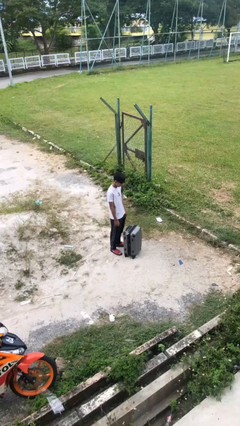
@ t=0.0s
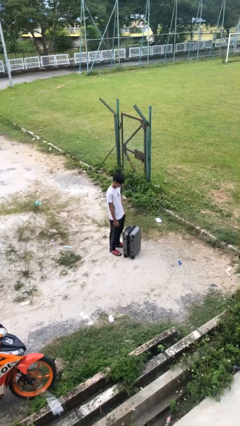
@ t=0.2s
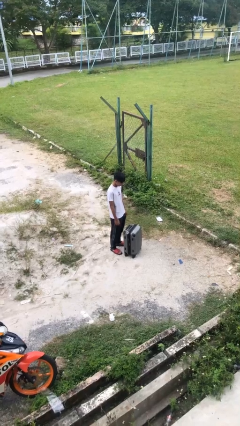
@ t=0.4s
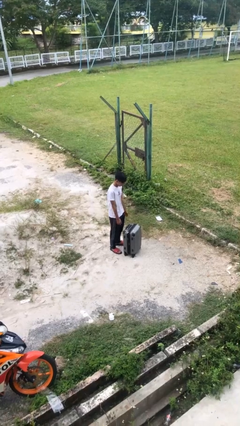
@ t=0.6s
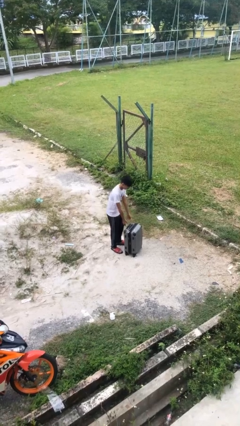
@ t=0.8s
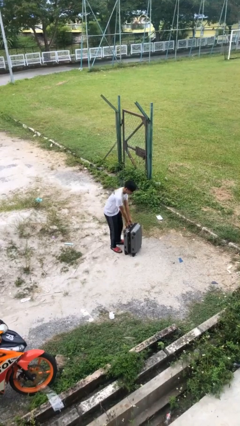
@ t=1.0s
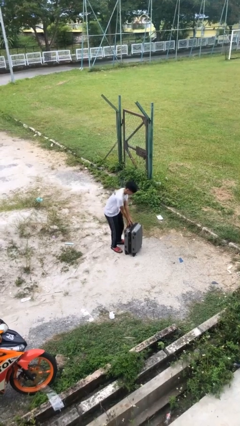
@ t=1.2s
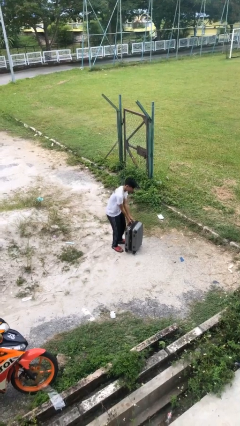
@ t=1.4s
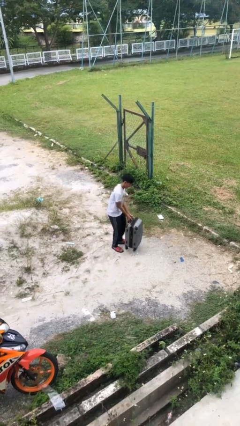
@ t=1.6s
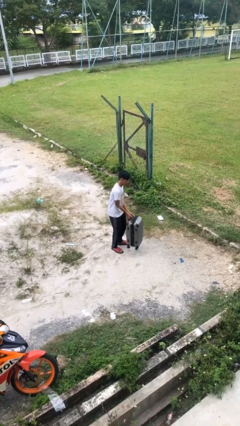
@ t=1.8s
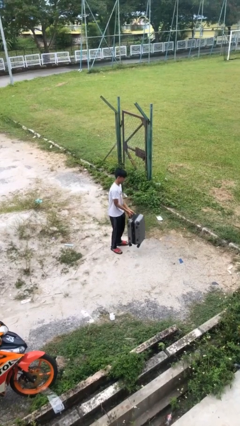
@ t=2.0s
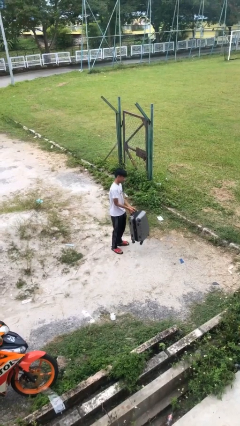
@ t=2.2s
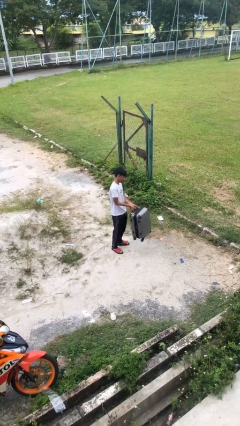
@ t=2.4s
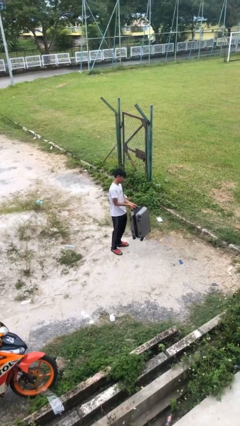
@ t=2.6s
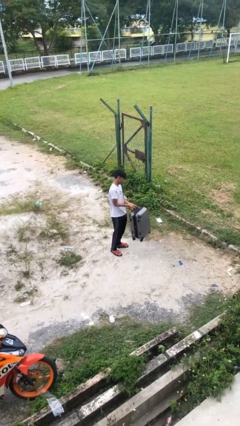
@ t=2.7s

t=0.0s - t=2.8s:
person picks up object from floor

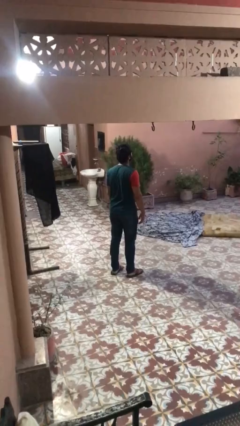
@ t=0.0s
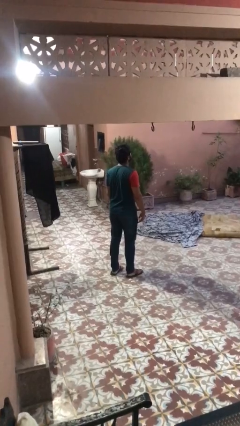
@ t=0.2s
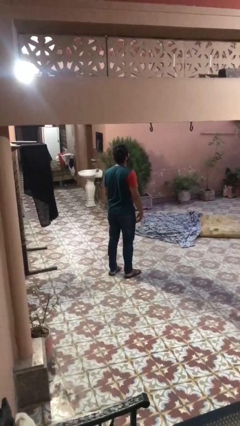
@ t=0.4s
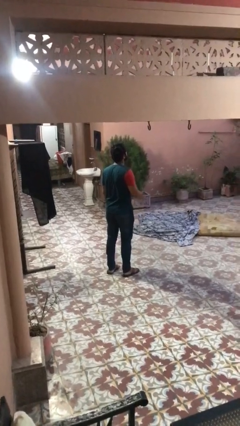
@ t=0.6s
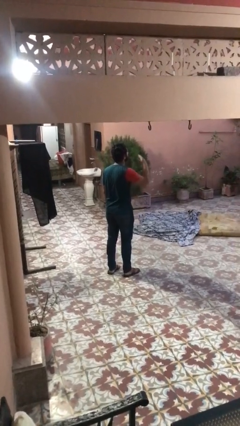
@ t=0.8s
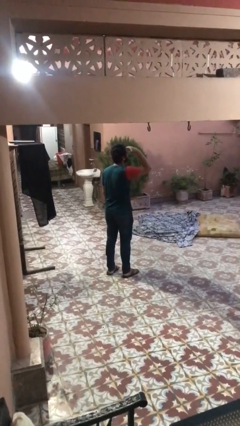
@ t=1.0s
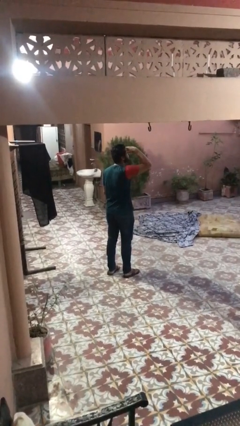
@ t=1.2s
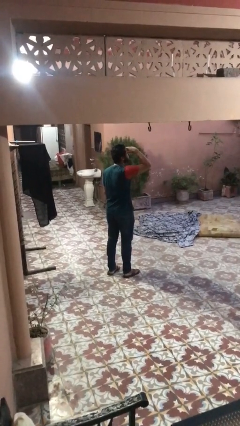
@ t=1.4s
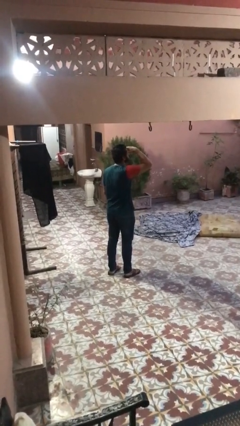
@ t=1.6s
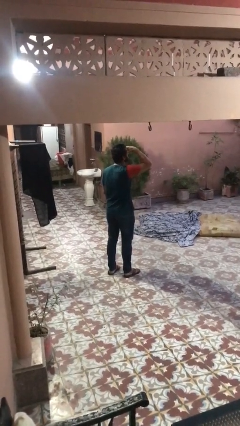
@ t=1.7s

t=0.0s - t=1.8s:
person shades eyes

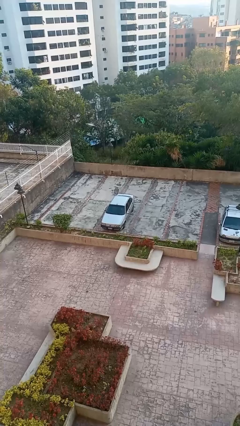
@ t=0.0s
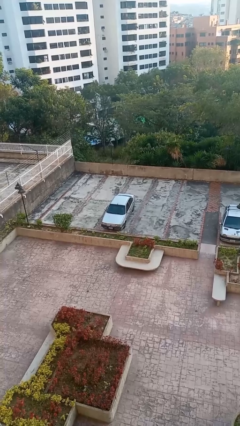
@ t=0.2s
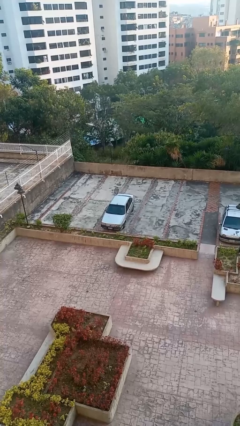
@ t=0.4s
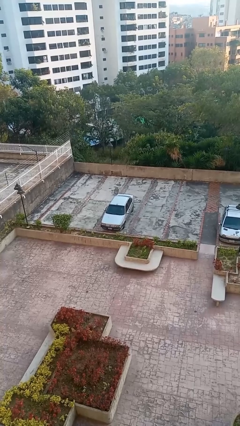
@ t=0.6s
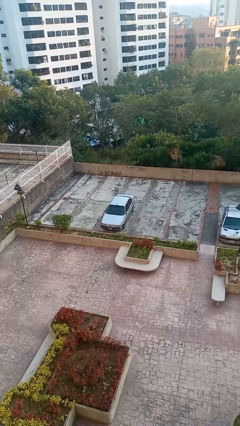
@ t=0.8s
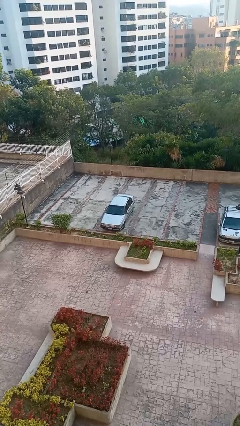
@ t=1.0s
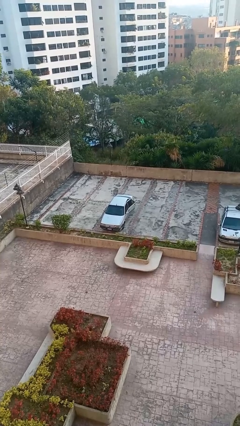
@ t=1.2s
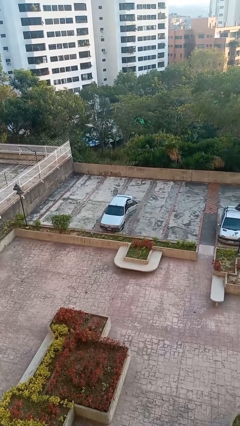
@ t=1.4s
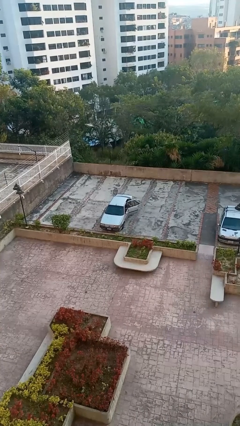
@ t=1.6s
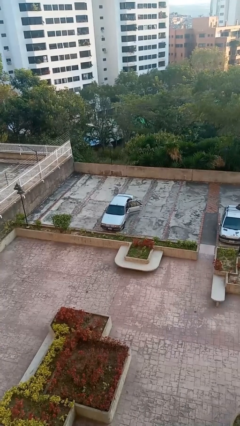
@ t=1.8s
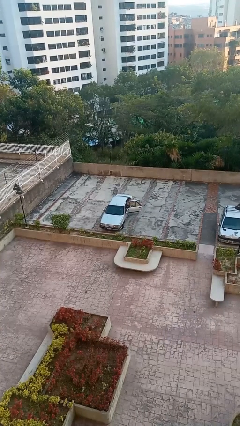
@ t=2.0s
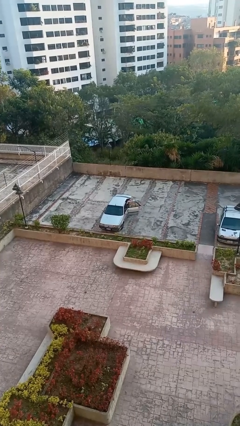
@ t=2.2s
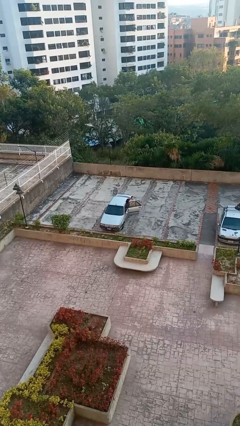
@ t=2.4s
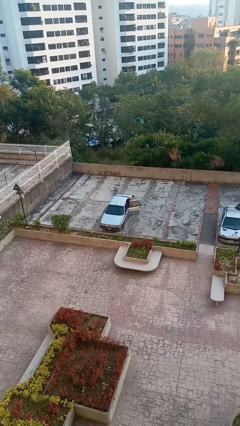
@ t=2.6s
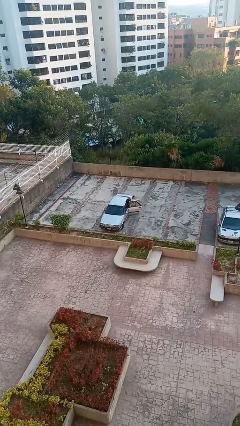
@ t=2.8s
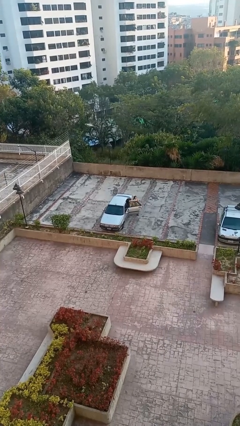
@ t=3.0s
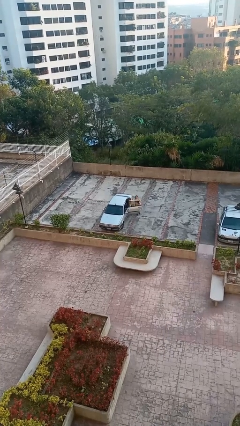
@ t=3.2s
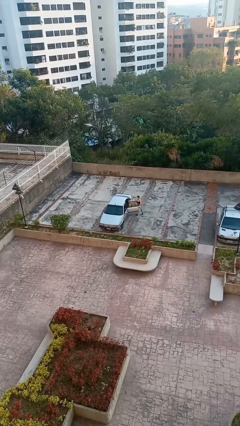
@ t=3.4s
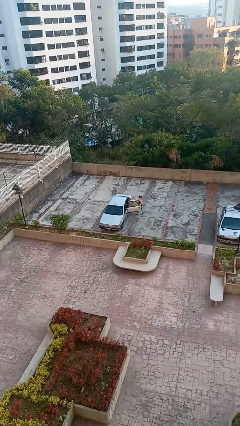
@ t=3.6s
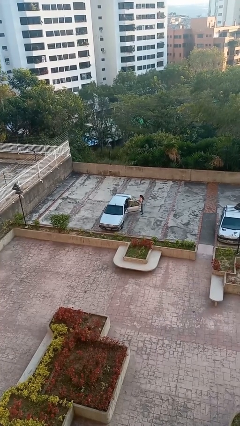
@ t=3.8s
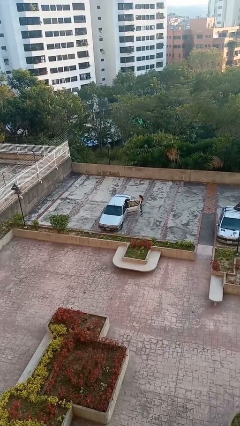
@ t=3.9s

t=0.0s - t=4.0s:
car drops off person

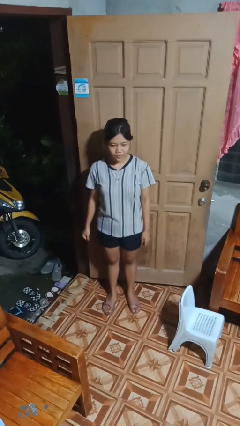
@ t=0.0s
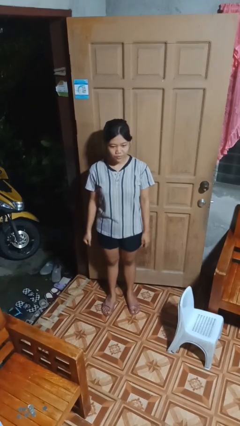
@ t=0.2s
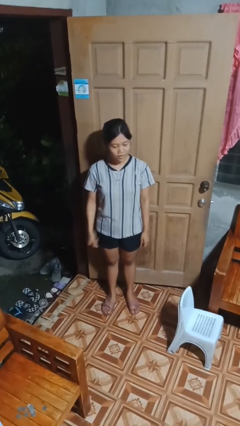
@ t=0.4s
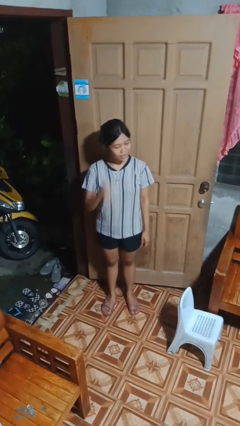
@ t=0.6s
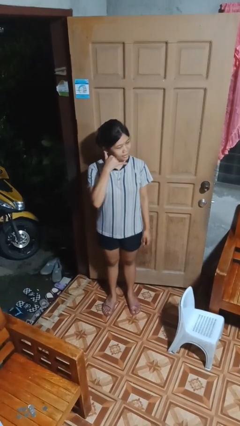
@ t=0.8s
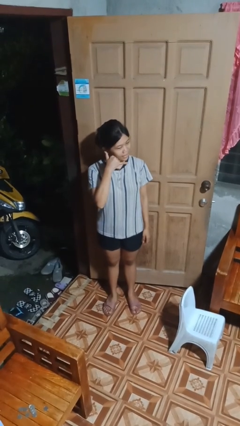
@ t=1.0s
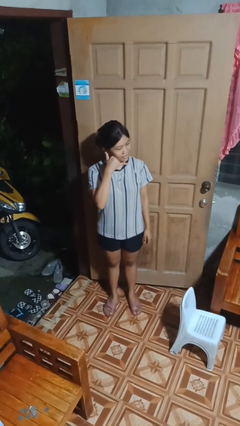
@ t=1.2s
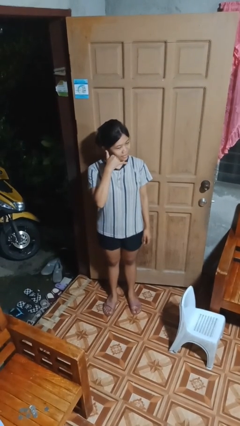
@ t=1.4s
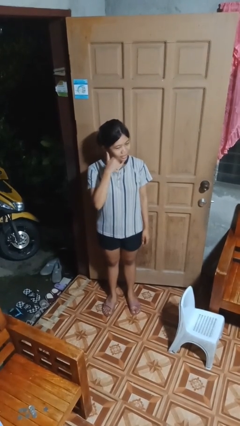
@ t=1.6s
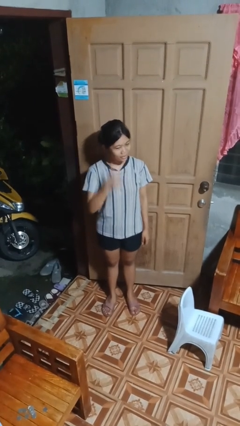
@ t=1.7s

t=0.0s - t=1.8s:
person gestures call me

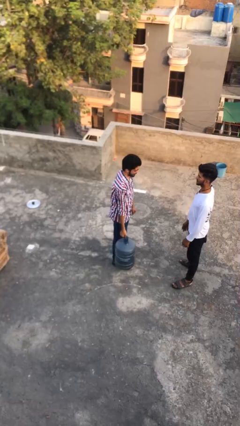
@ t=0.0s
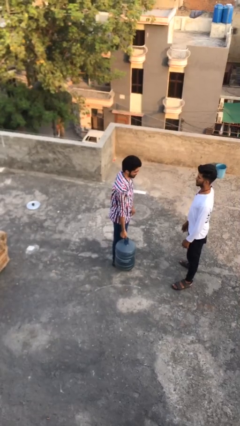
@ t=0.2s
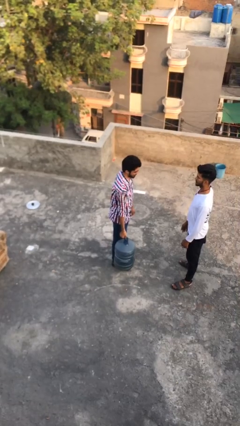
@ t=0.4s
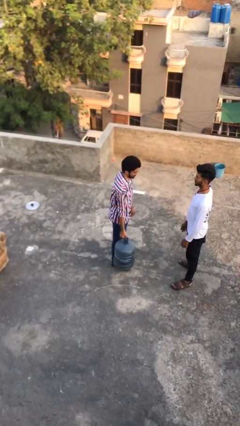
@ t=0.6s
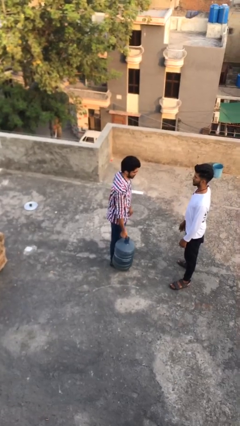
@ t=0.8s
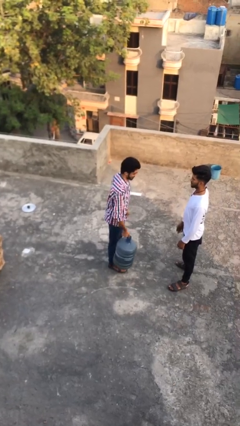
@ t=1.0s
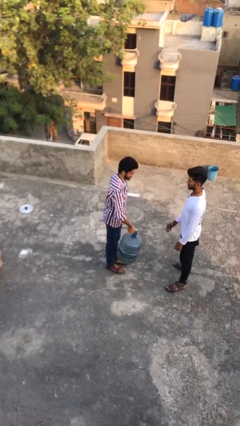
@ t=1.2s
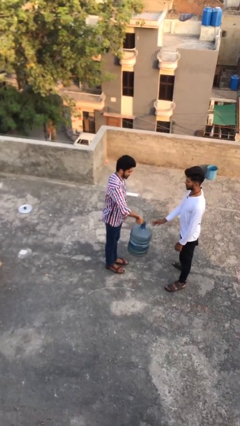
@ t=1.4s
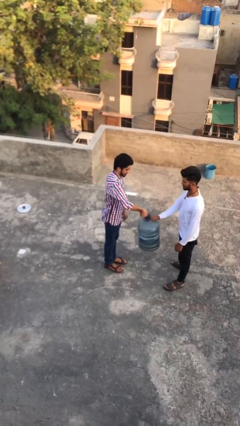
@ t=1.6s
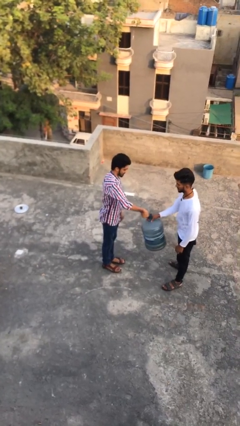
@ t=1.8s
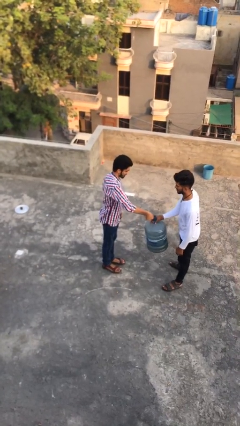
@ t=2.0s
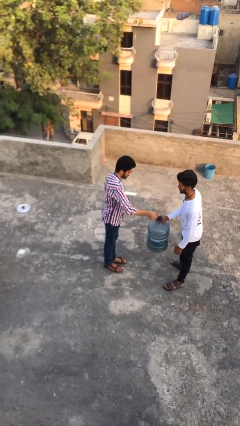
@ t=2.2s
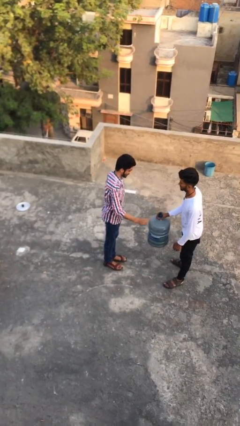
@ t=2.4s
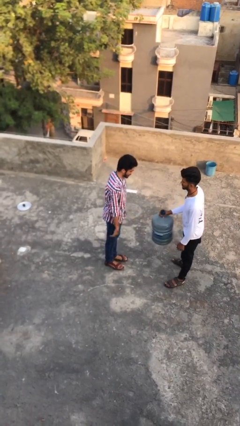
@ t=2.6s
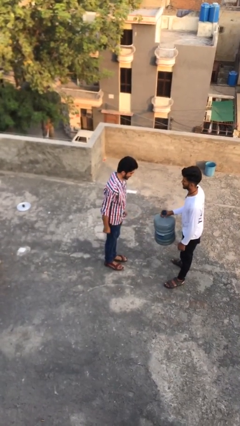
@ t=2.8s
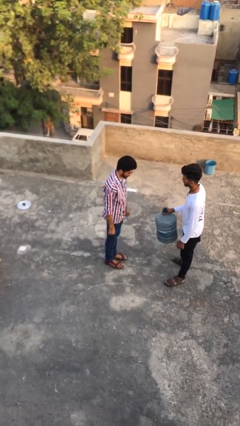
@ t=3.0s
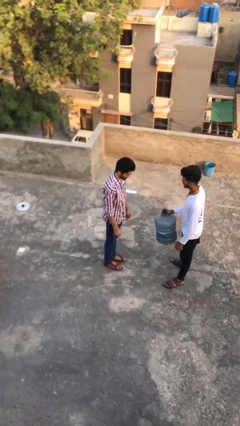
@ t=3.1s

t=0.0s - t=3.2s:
person transfers object to person

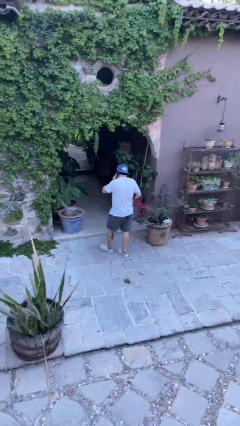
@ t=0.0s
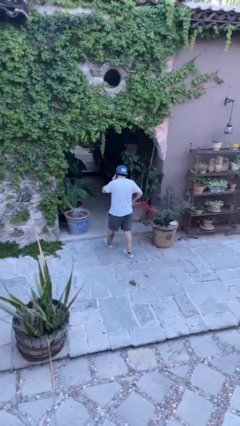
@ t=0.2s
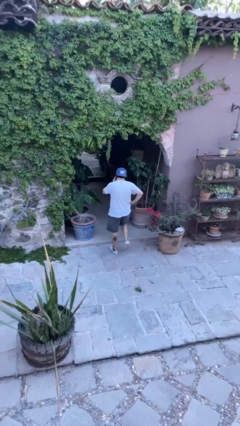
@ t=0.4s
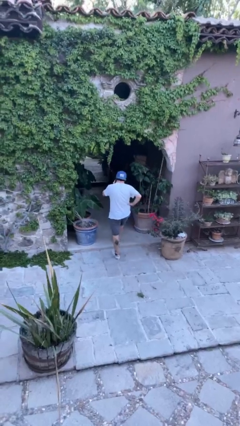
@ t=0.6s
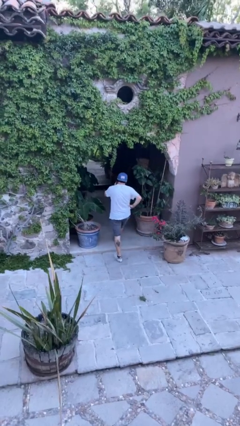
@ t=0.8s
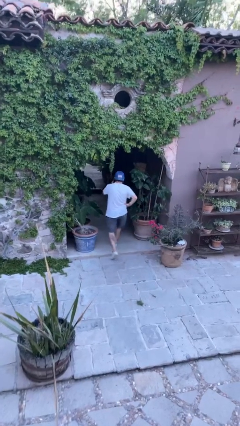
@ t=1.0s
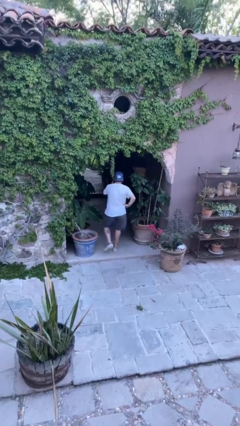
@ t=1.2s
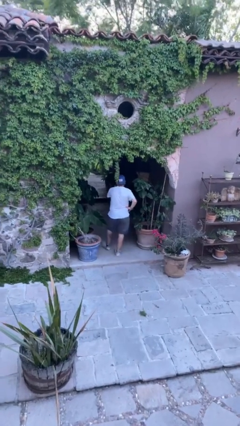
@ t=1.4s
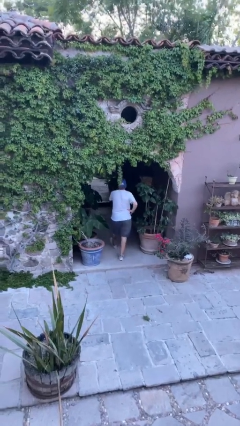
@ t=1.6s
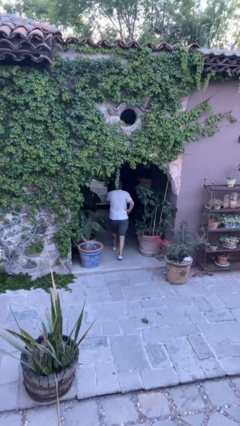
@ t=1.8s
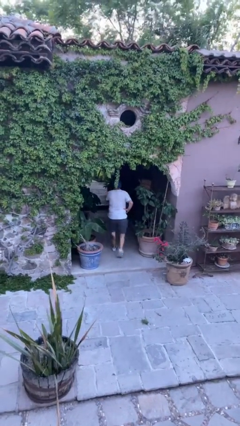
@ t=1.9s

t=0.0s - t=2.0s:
person exits scene through structure

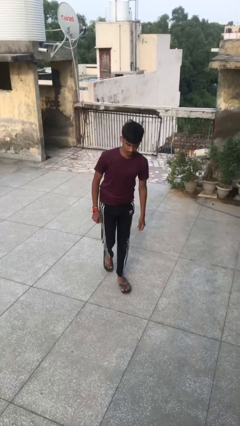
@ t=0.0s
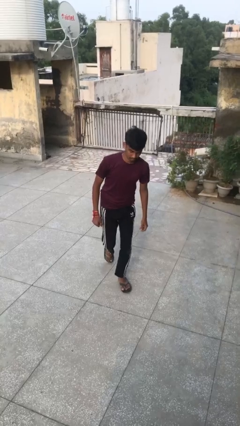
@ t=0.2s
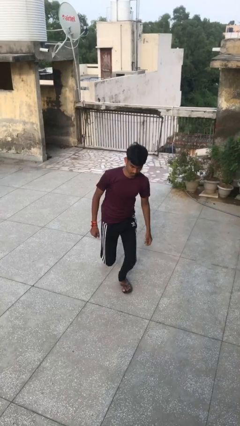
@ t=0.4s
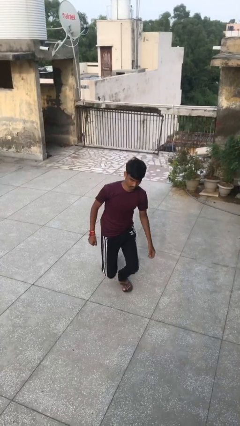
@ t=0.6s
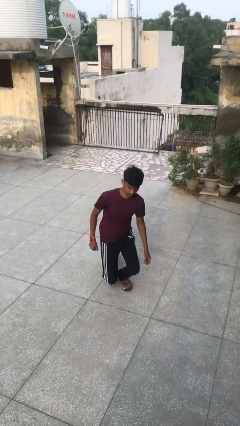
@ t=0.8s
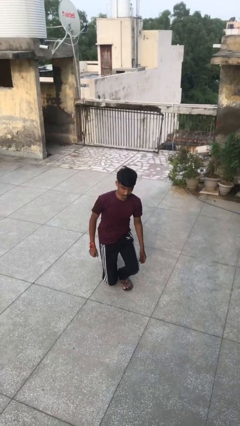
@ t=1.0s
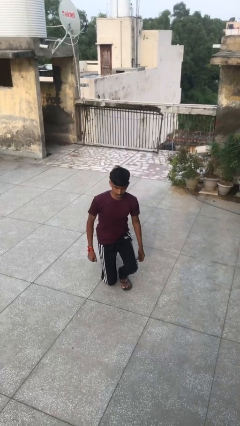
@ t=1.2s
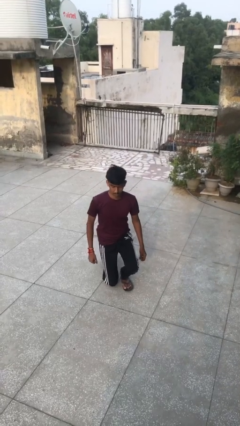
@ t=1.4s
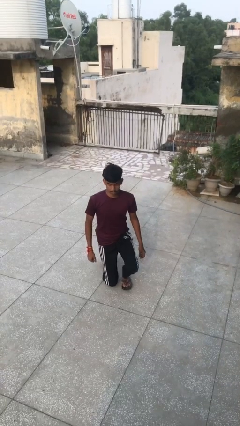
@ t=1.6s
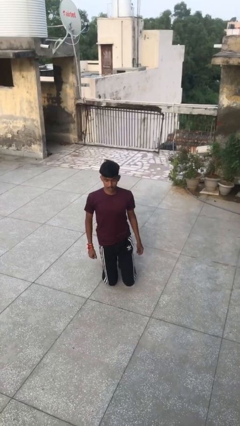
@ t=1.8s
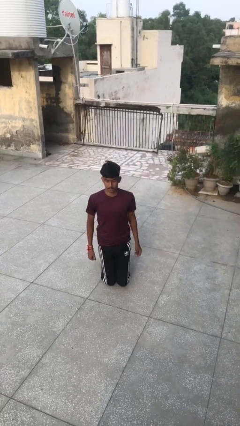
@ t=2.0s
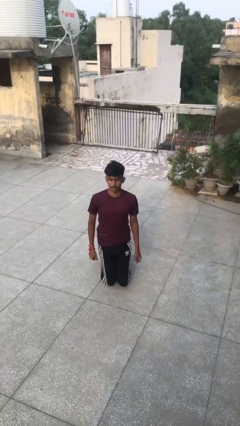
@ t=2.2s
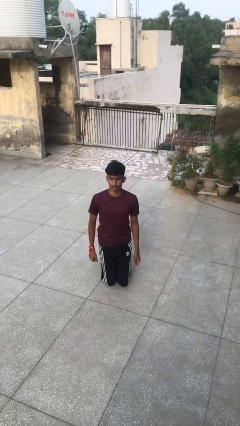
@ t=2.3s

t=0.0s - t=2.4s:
person kneels
